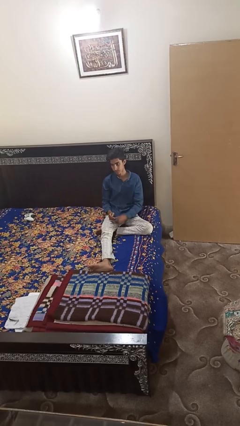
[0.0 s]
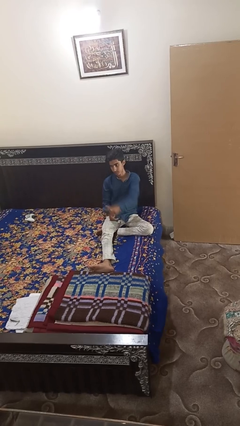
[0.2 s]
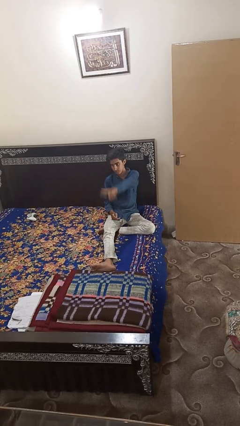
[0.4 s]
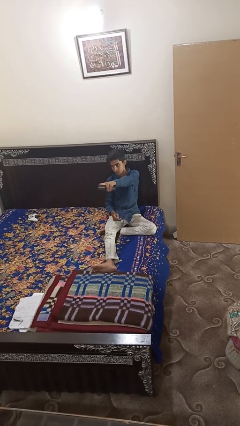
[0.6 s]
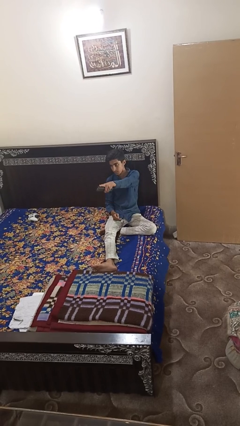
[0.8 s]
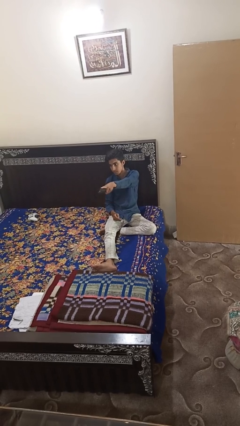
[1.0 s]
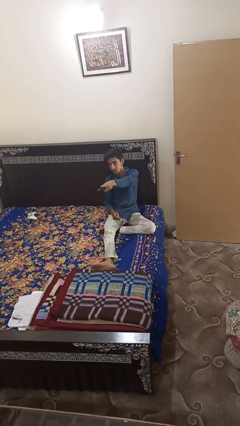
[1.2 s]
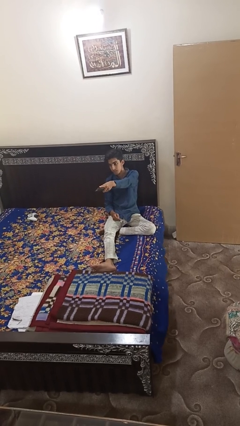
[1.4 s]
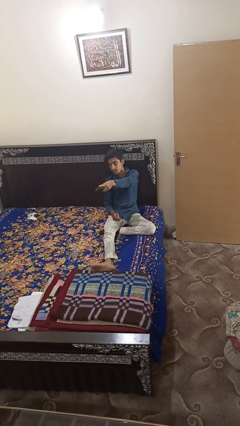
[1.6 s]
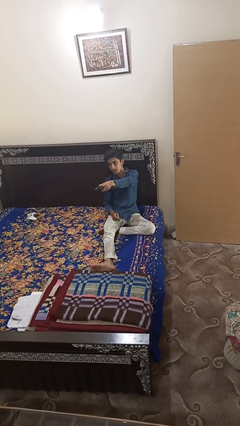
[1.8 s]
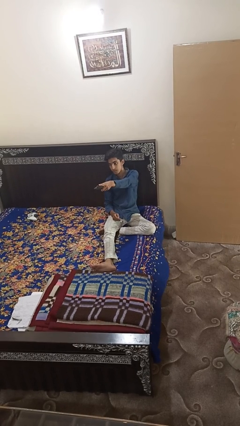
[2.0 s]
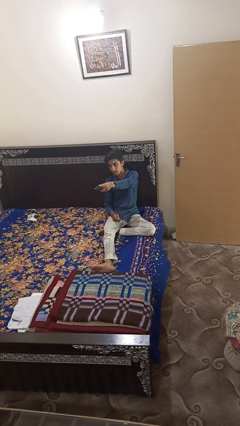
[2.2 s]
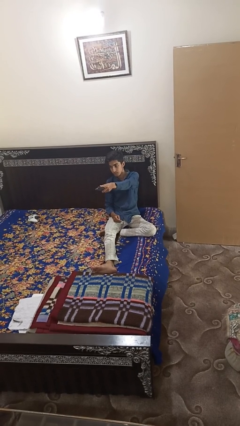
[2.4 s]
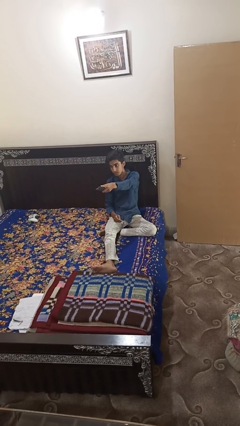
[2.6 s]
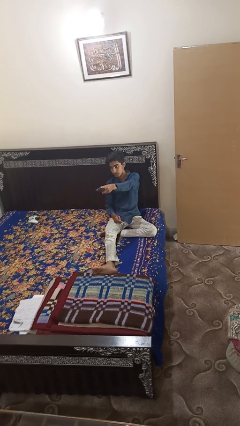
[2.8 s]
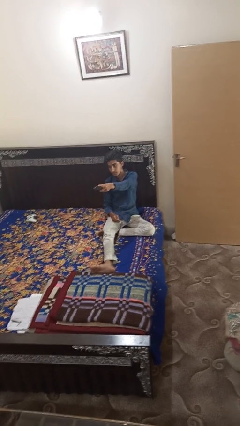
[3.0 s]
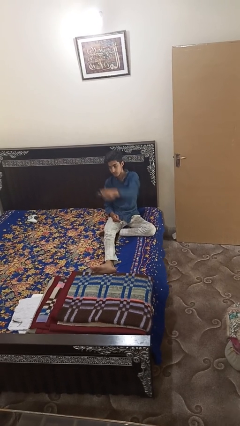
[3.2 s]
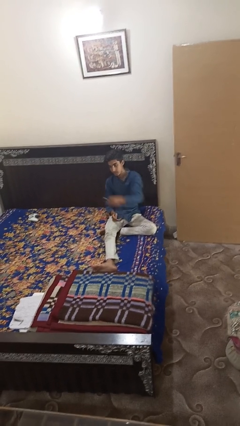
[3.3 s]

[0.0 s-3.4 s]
person uses television remote

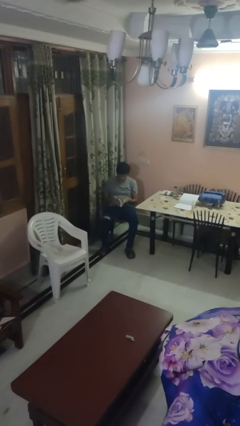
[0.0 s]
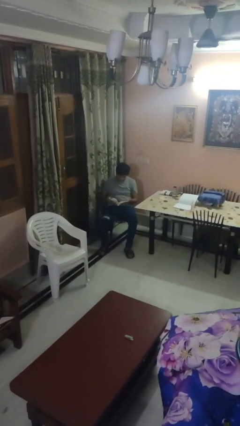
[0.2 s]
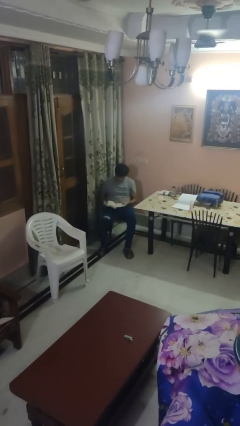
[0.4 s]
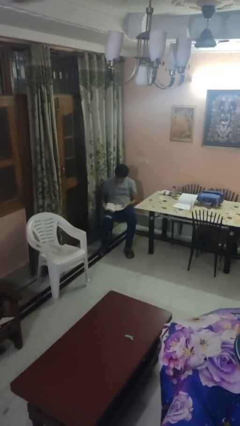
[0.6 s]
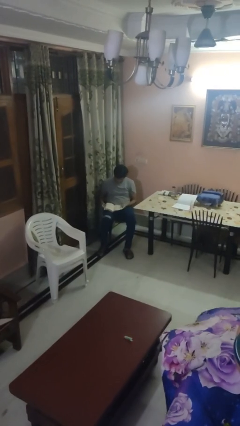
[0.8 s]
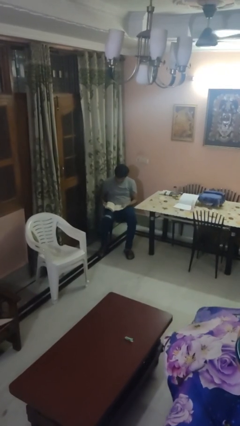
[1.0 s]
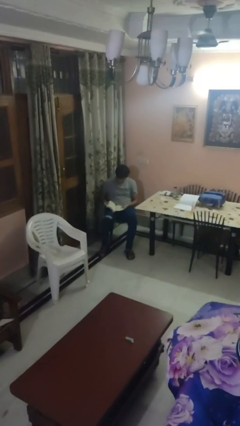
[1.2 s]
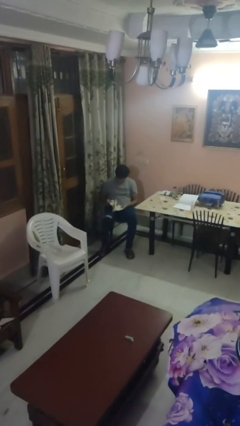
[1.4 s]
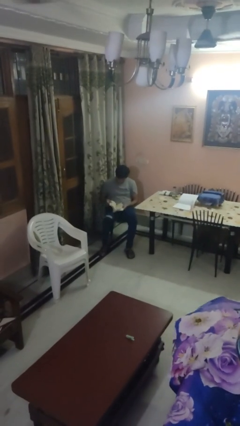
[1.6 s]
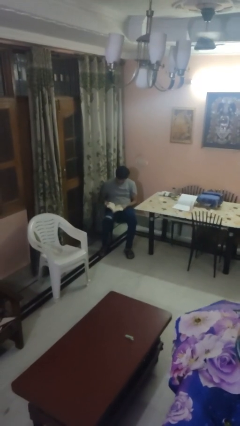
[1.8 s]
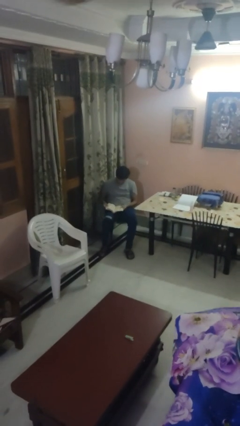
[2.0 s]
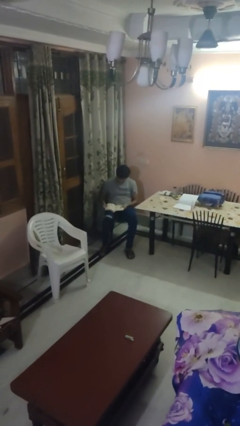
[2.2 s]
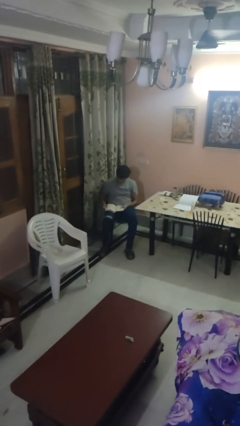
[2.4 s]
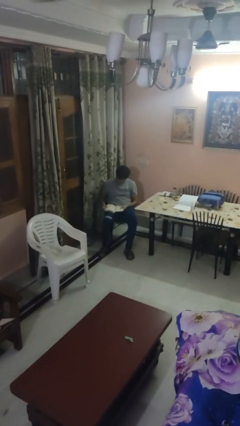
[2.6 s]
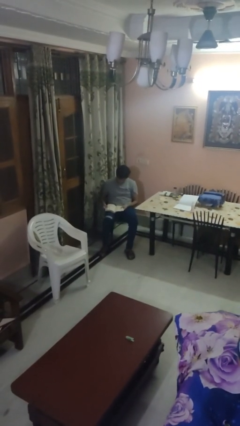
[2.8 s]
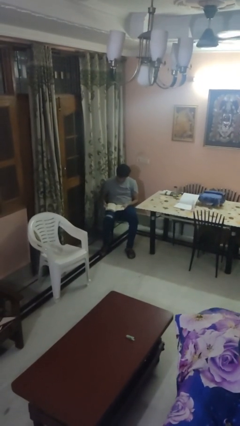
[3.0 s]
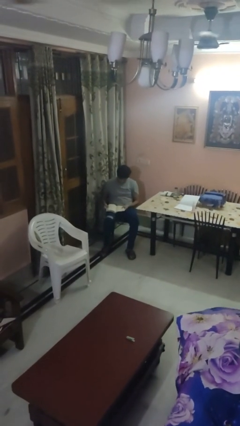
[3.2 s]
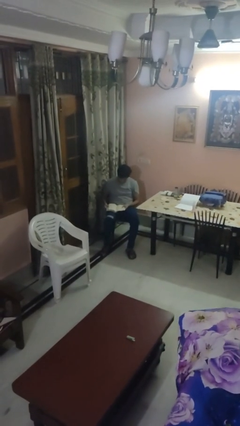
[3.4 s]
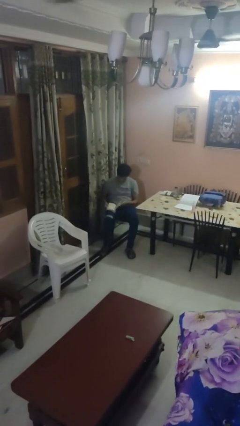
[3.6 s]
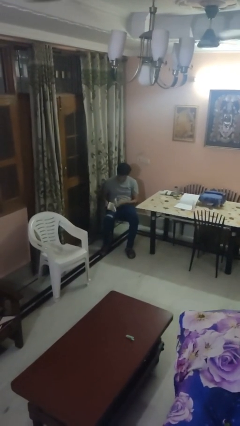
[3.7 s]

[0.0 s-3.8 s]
person reads book

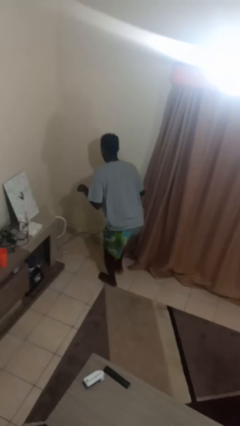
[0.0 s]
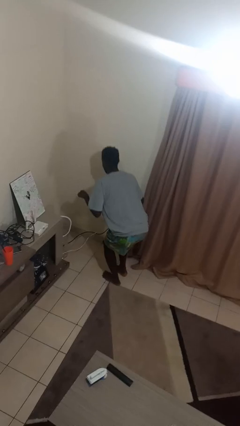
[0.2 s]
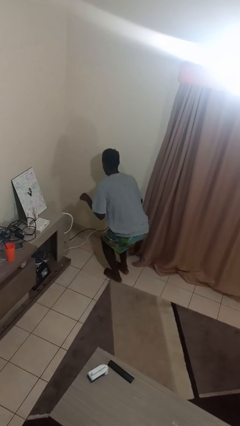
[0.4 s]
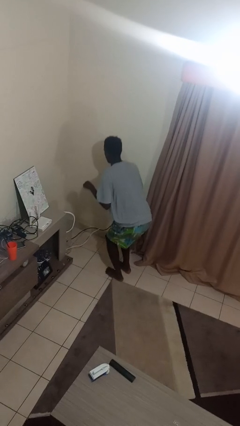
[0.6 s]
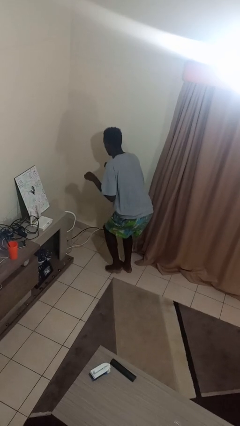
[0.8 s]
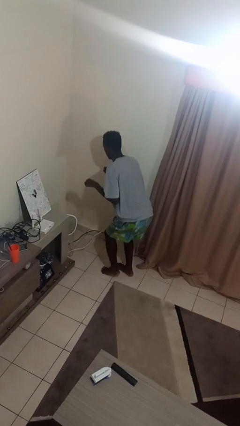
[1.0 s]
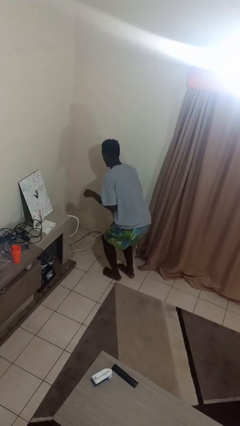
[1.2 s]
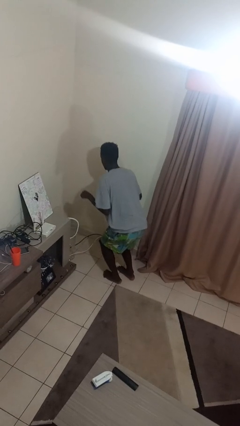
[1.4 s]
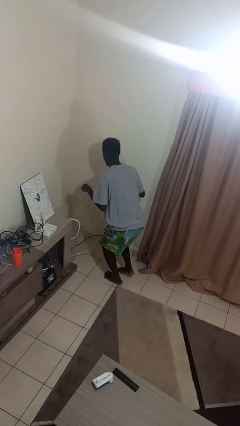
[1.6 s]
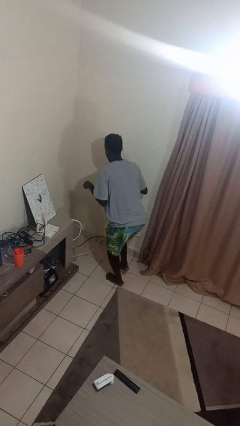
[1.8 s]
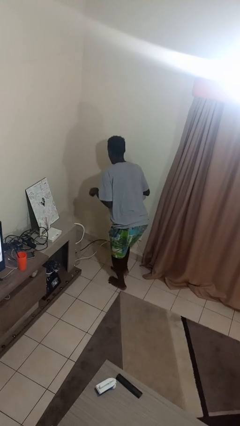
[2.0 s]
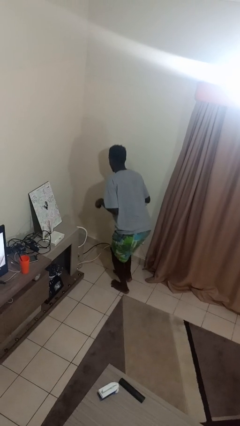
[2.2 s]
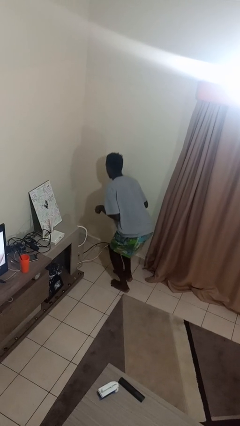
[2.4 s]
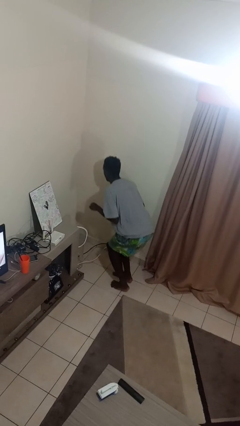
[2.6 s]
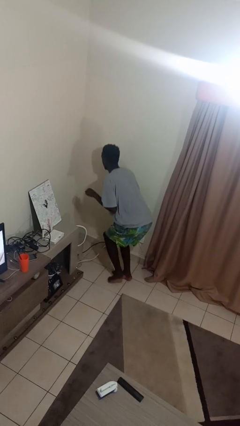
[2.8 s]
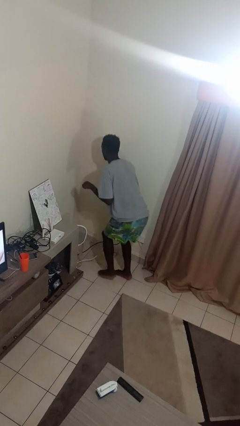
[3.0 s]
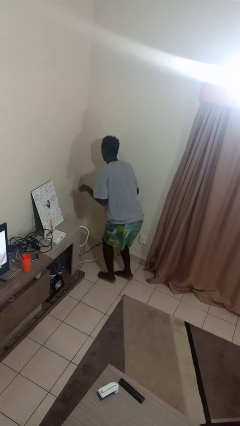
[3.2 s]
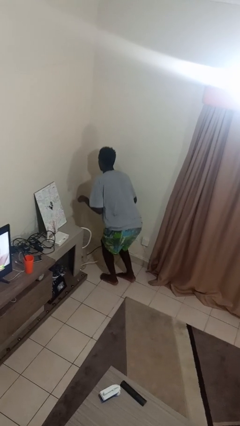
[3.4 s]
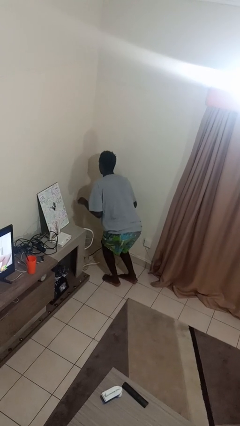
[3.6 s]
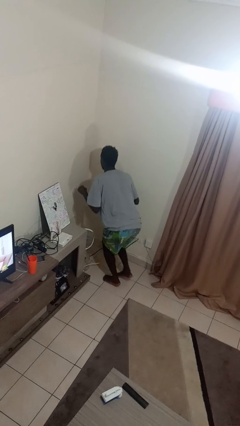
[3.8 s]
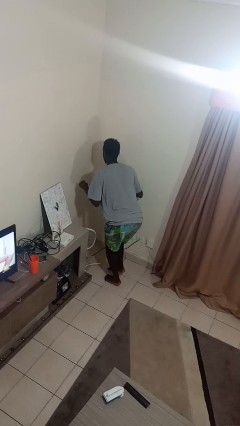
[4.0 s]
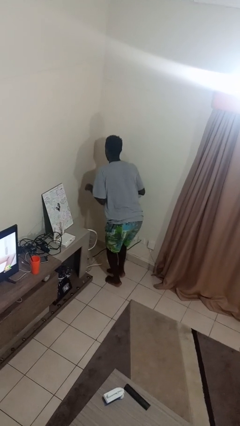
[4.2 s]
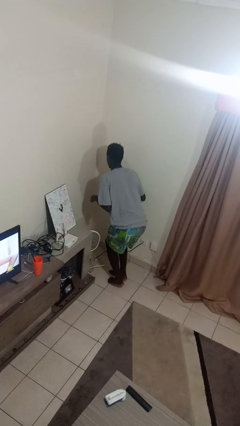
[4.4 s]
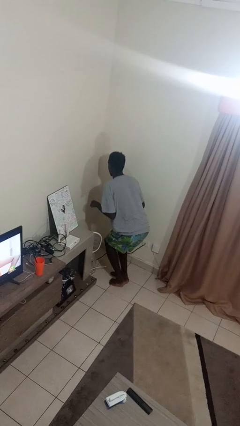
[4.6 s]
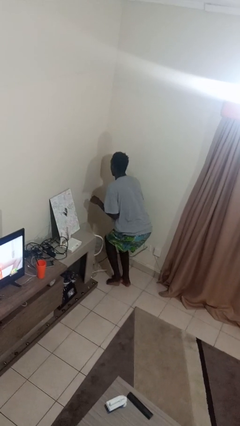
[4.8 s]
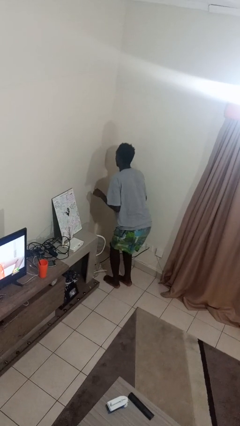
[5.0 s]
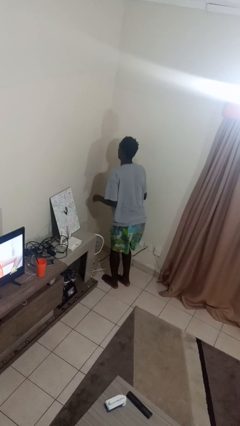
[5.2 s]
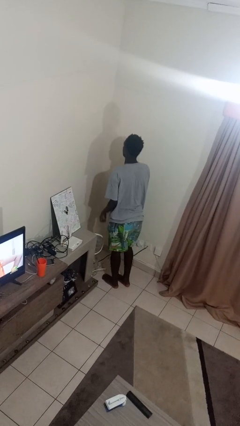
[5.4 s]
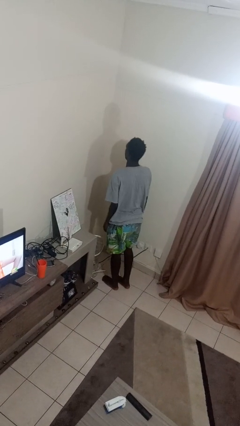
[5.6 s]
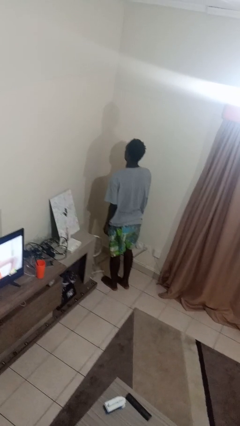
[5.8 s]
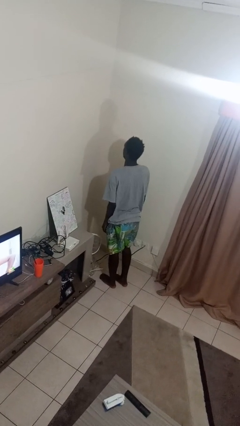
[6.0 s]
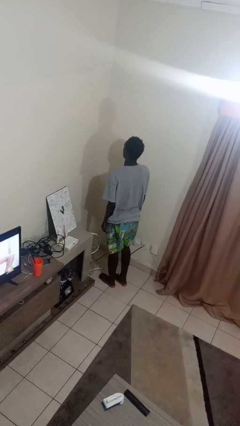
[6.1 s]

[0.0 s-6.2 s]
person walks tiptoe

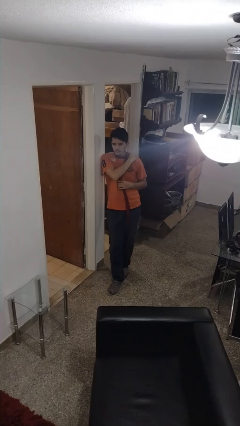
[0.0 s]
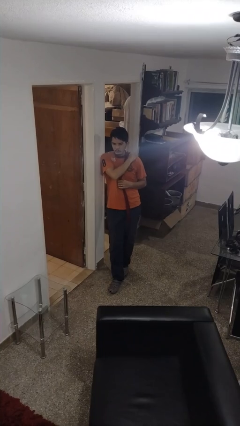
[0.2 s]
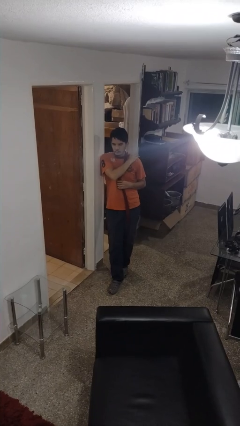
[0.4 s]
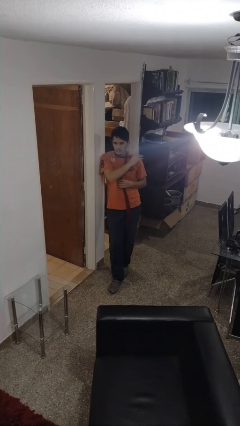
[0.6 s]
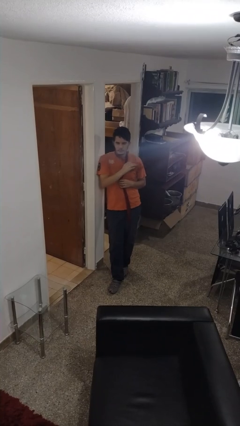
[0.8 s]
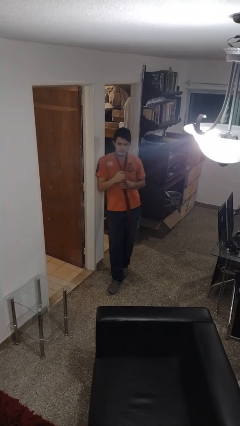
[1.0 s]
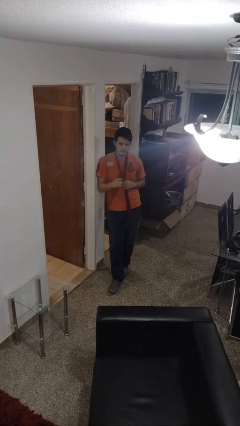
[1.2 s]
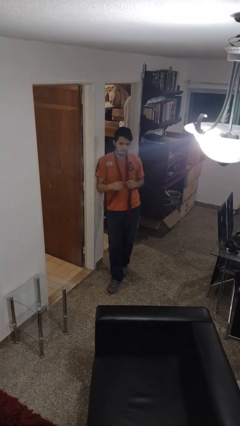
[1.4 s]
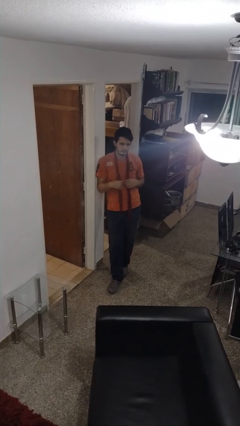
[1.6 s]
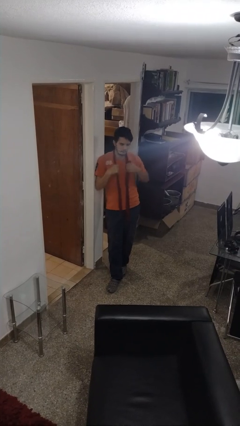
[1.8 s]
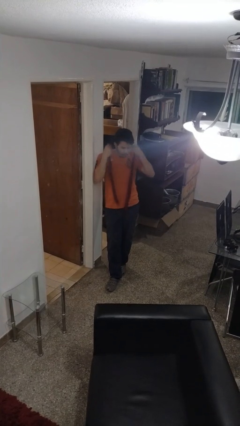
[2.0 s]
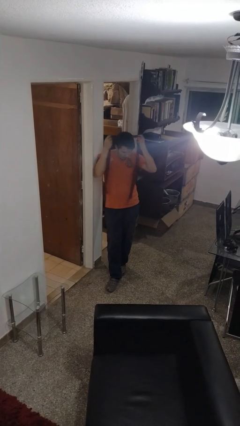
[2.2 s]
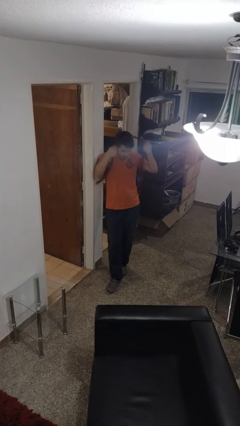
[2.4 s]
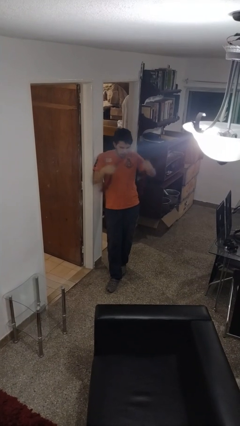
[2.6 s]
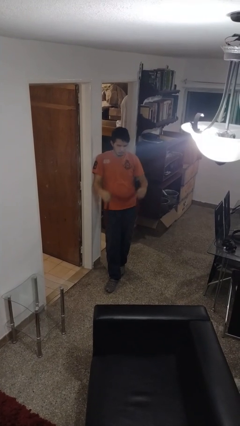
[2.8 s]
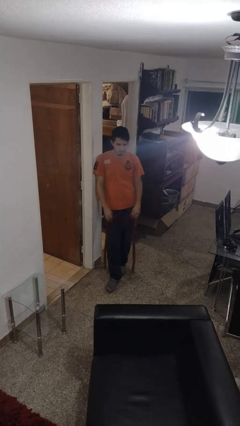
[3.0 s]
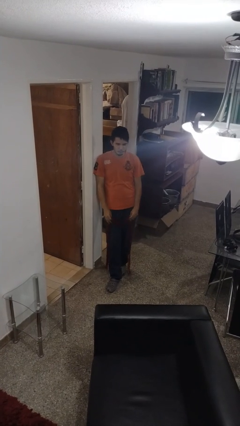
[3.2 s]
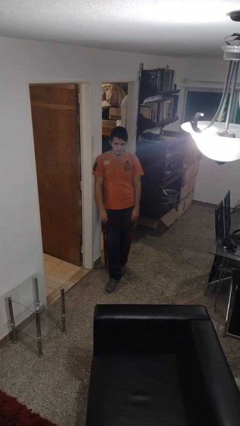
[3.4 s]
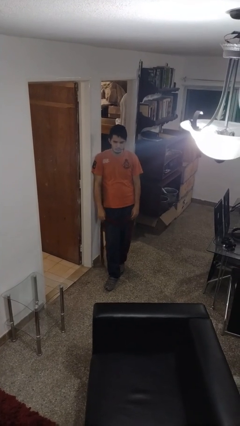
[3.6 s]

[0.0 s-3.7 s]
person takes off scarf

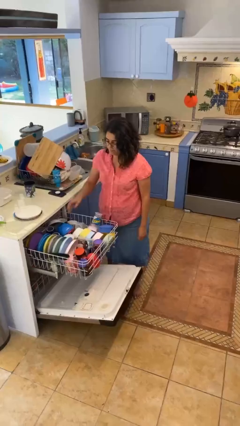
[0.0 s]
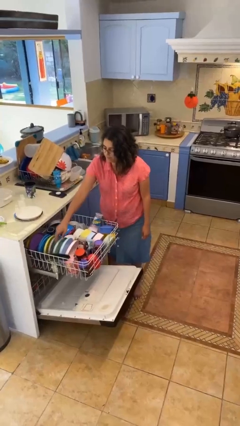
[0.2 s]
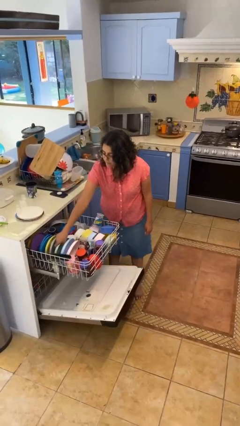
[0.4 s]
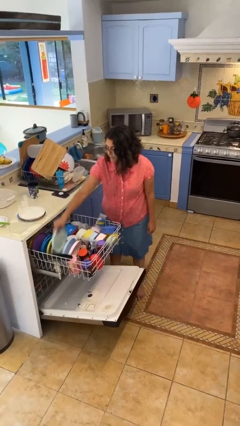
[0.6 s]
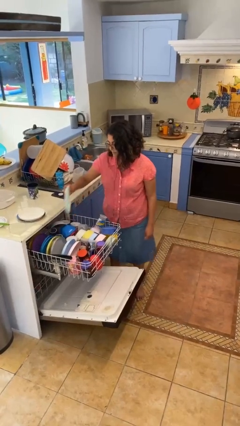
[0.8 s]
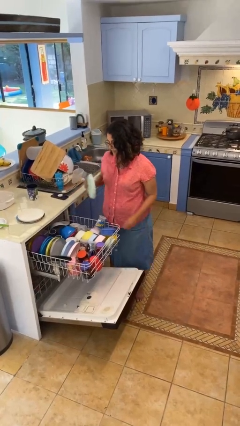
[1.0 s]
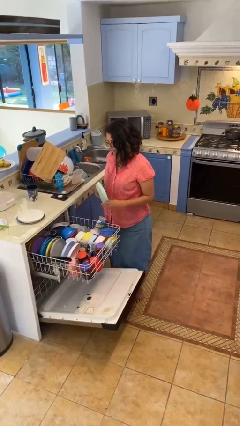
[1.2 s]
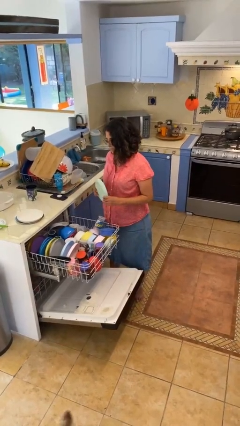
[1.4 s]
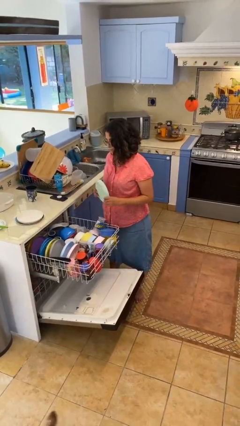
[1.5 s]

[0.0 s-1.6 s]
person unloads dishwasher
